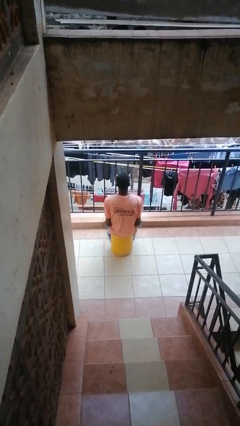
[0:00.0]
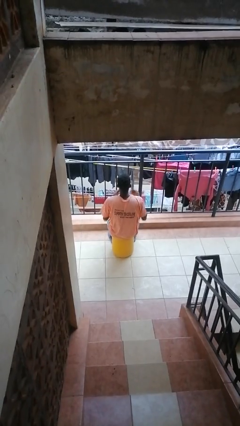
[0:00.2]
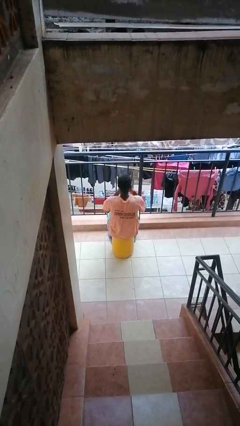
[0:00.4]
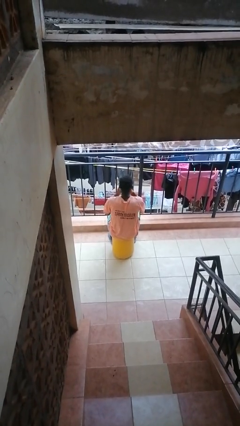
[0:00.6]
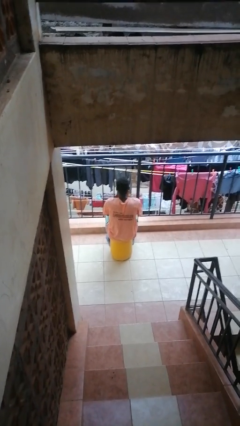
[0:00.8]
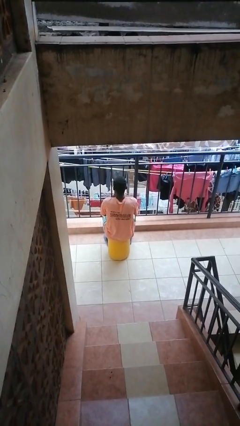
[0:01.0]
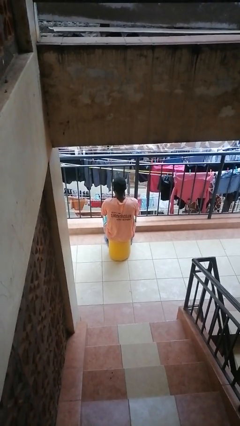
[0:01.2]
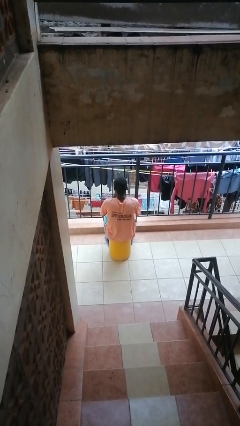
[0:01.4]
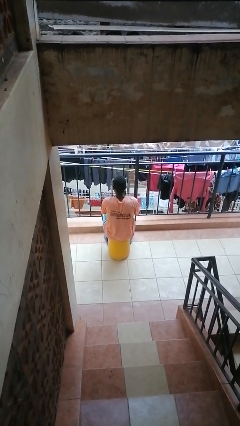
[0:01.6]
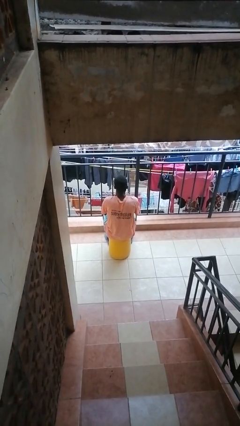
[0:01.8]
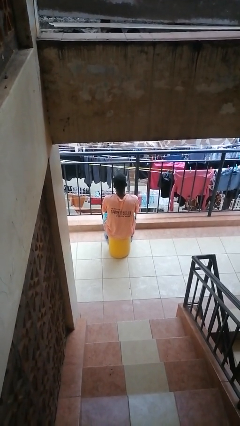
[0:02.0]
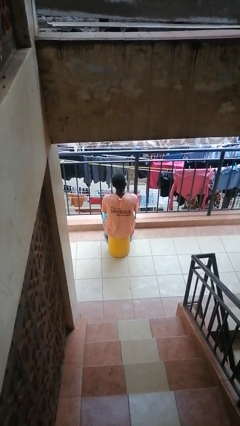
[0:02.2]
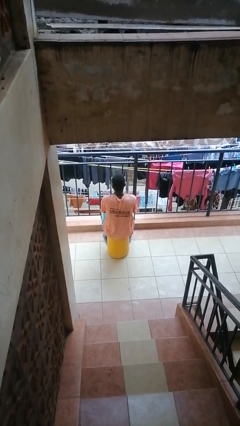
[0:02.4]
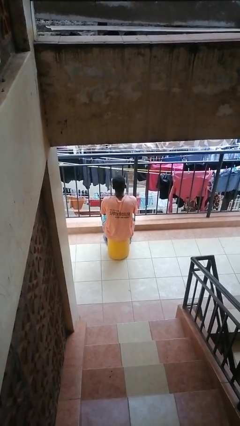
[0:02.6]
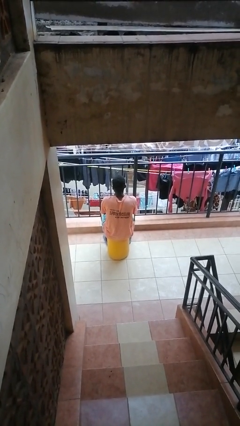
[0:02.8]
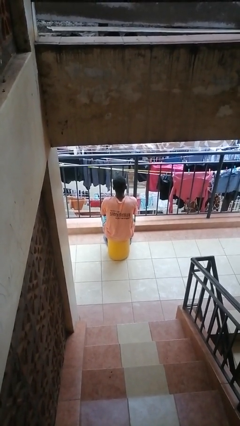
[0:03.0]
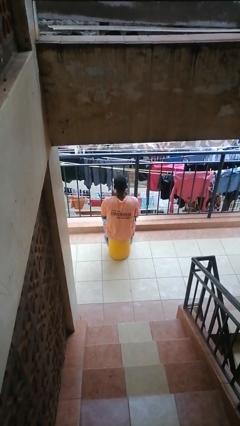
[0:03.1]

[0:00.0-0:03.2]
person blows into hands

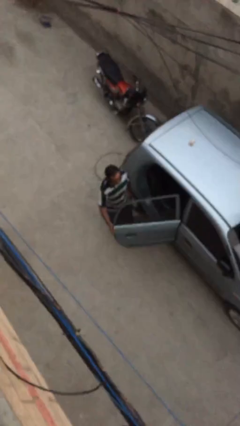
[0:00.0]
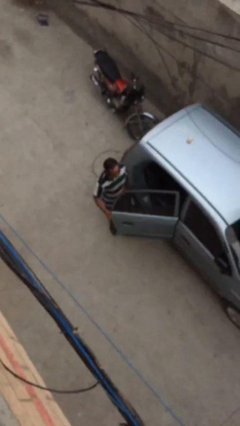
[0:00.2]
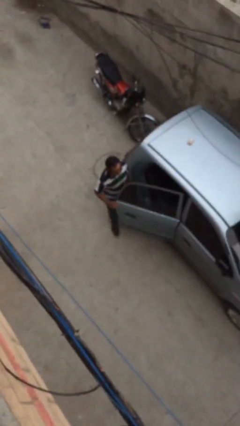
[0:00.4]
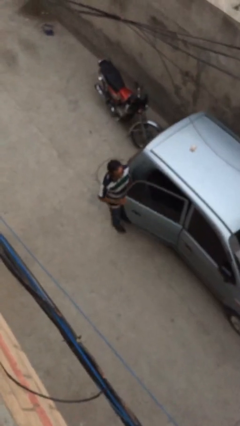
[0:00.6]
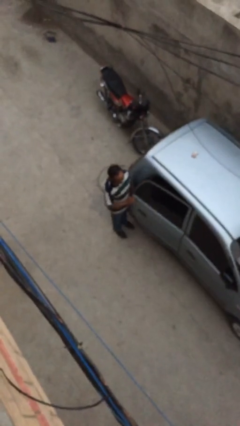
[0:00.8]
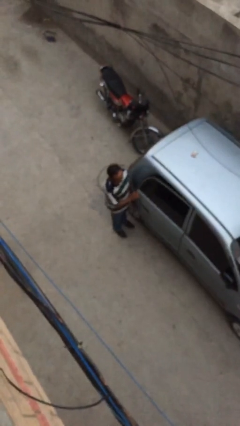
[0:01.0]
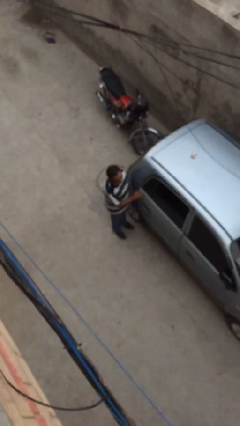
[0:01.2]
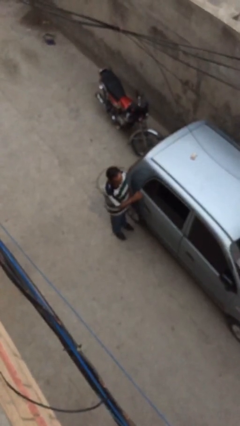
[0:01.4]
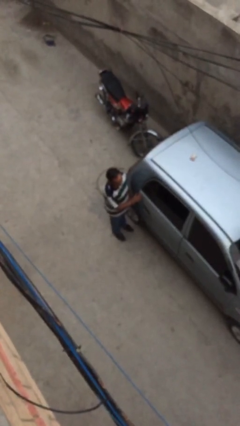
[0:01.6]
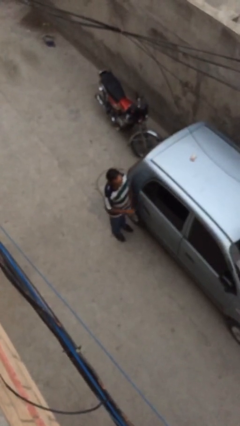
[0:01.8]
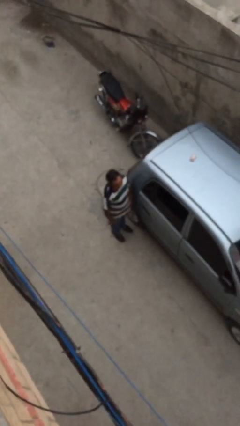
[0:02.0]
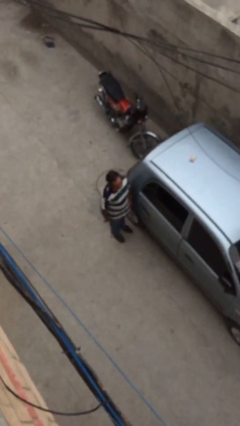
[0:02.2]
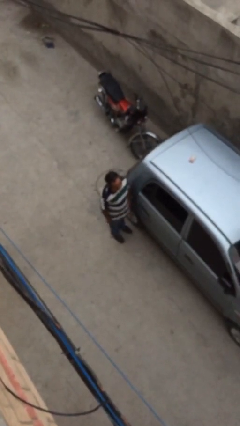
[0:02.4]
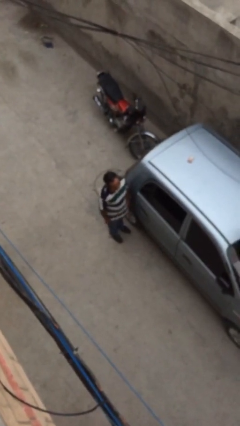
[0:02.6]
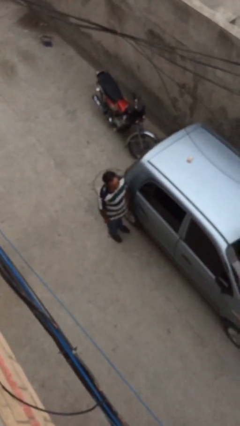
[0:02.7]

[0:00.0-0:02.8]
person closes car door

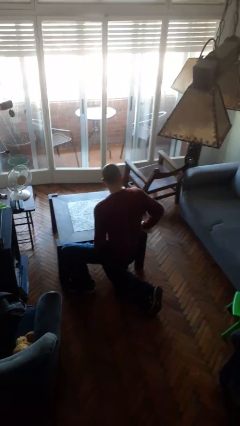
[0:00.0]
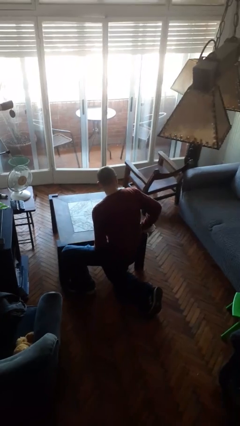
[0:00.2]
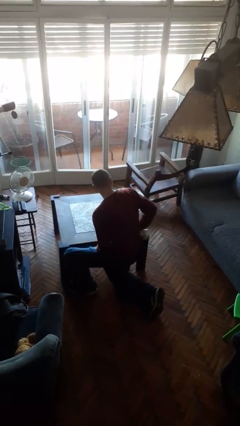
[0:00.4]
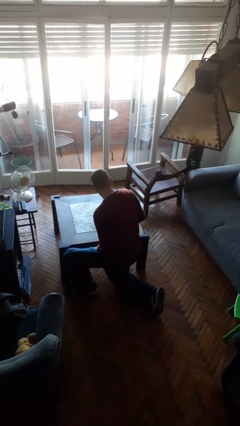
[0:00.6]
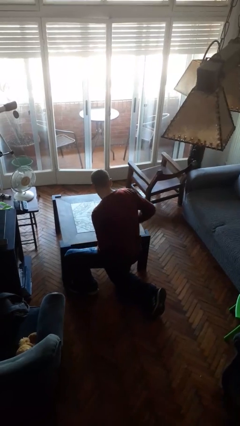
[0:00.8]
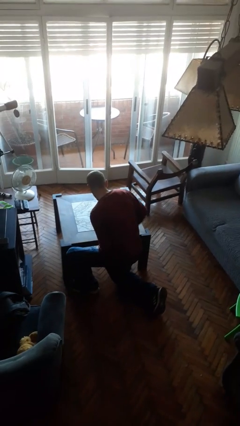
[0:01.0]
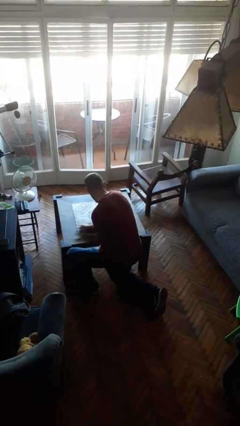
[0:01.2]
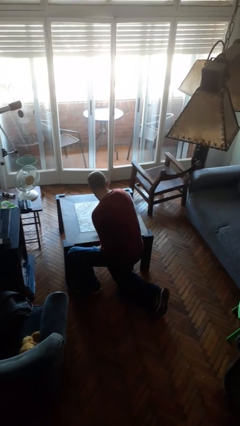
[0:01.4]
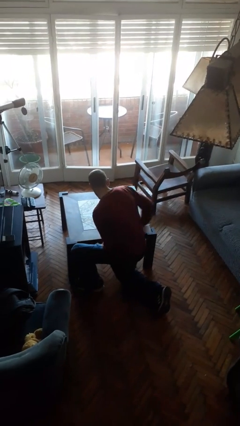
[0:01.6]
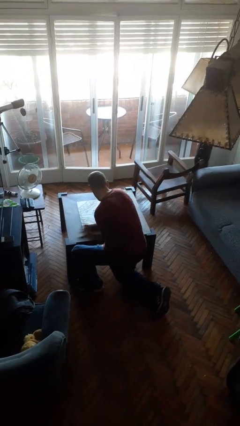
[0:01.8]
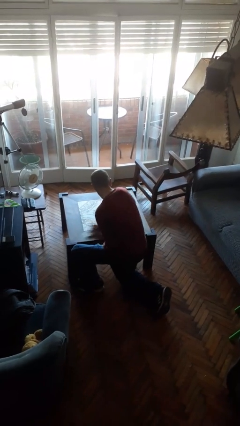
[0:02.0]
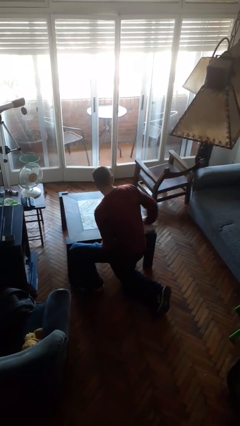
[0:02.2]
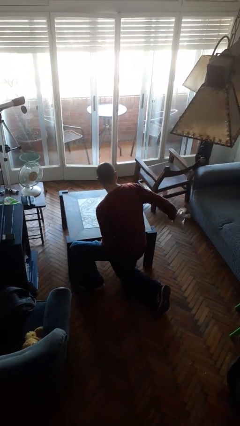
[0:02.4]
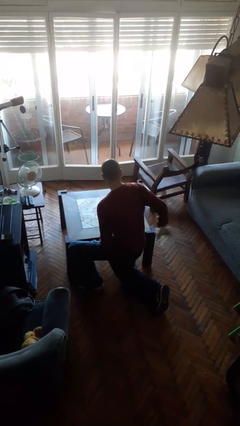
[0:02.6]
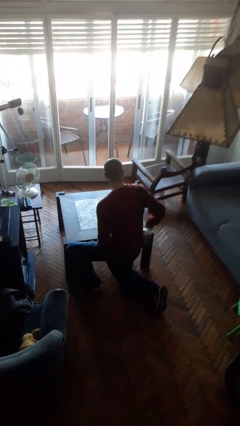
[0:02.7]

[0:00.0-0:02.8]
person cleans table with rag

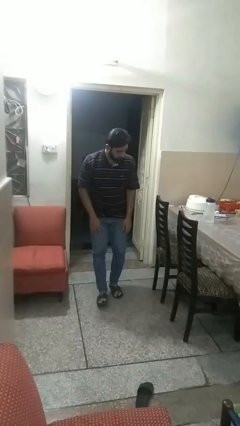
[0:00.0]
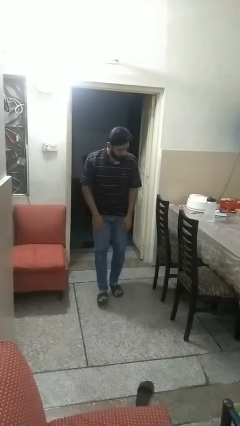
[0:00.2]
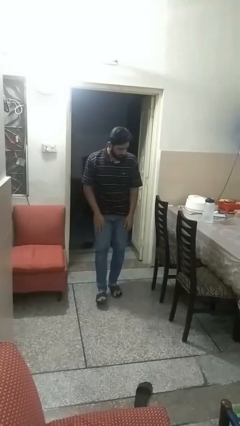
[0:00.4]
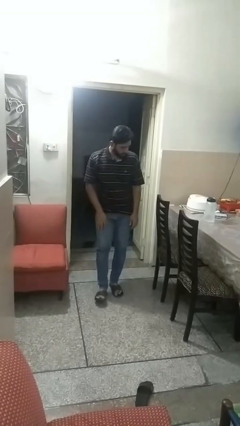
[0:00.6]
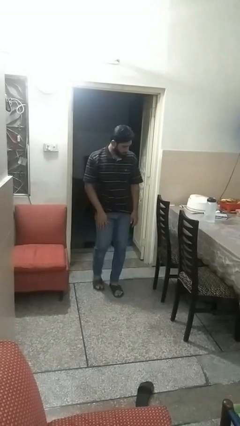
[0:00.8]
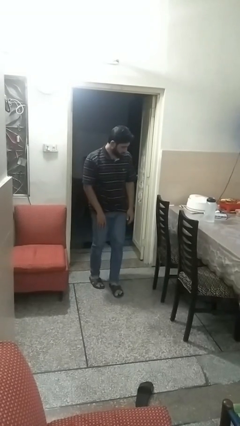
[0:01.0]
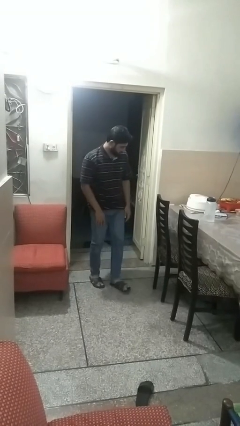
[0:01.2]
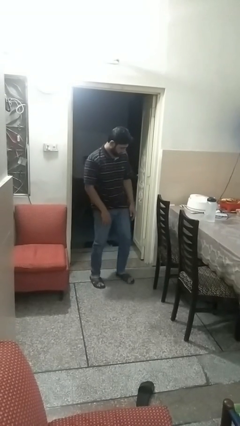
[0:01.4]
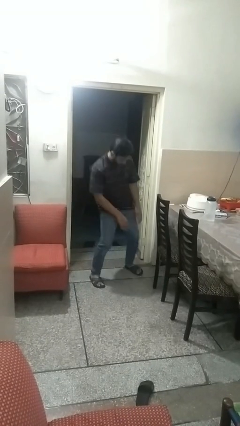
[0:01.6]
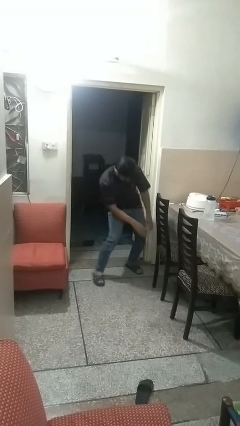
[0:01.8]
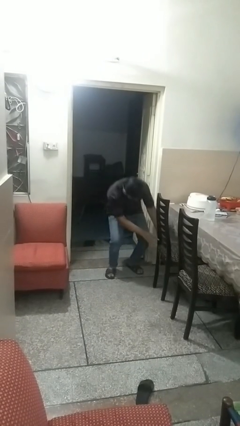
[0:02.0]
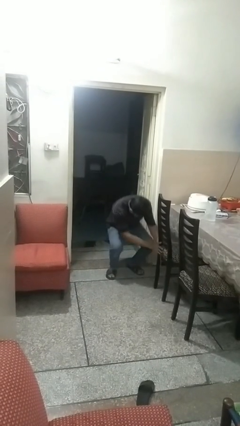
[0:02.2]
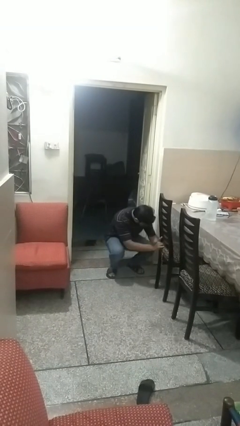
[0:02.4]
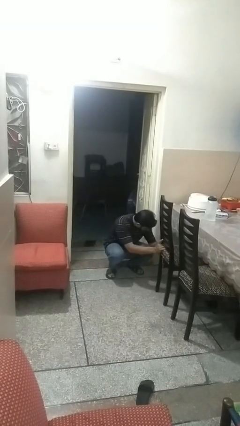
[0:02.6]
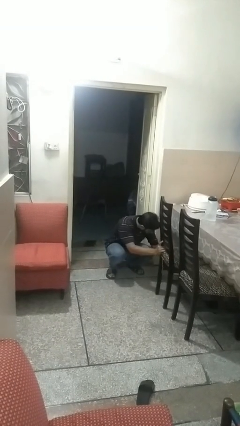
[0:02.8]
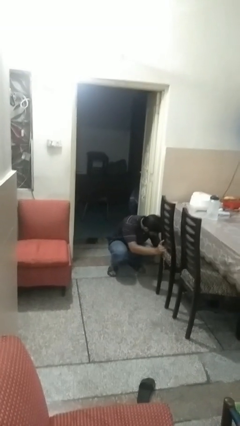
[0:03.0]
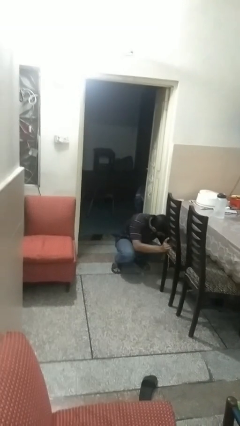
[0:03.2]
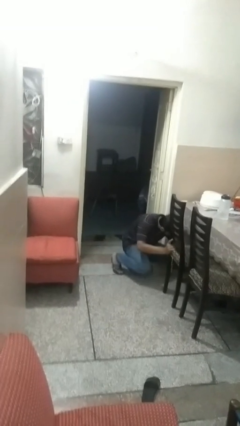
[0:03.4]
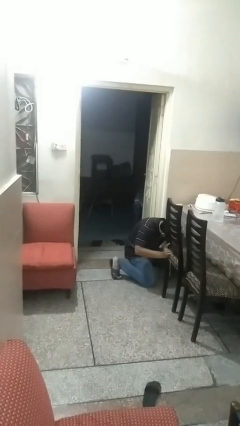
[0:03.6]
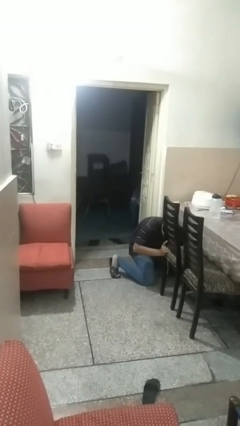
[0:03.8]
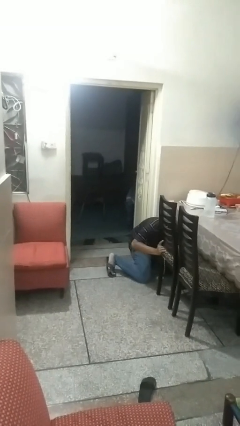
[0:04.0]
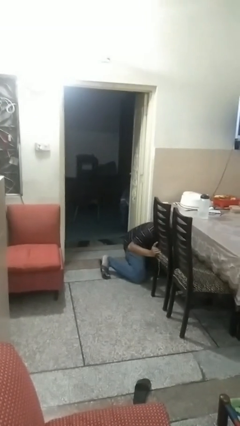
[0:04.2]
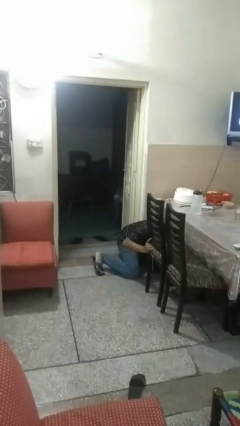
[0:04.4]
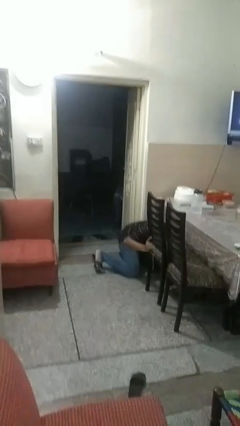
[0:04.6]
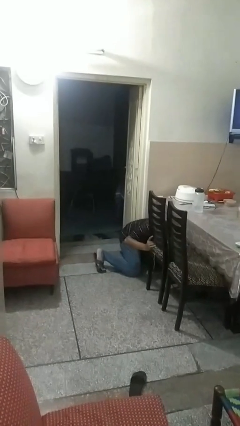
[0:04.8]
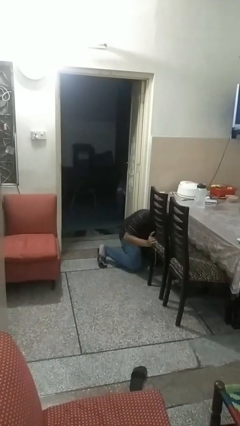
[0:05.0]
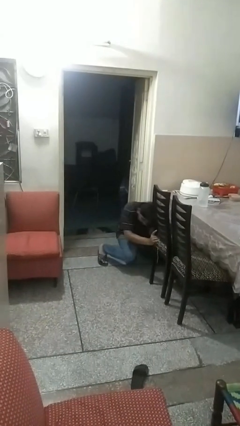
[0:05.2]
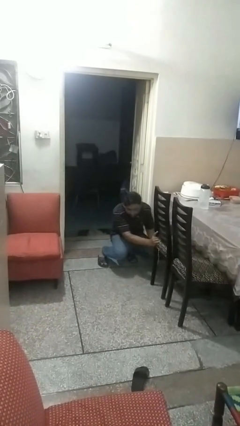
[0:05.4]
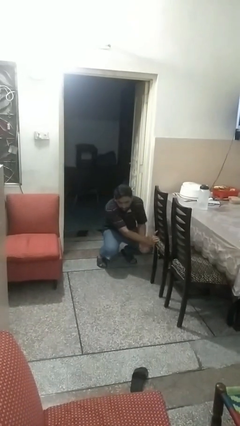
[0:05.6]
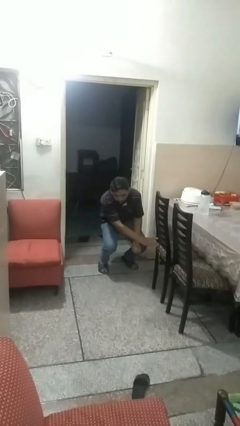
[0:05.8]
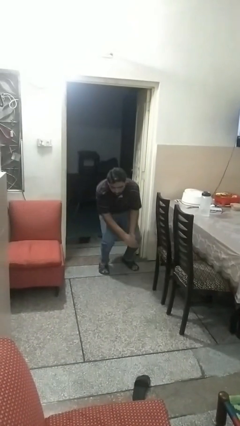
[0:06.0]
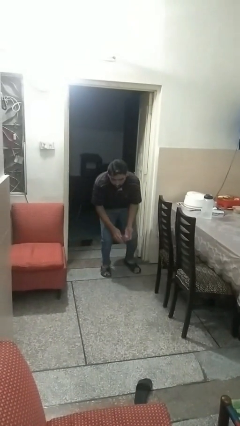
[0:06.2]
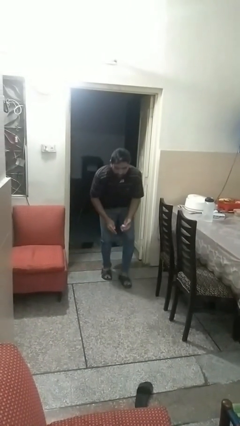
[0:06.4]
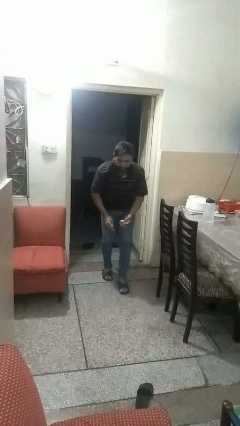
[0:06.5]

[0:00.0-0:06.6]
person picks up object from floor

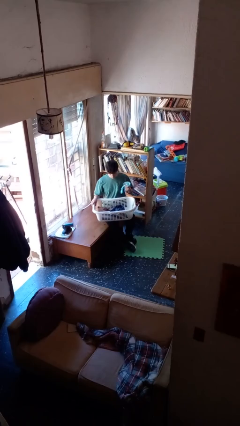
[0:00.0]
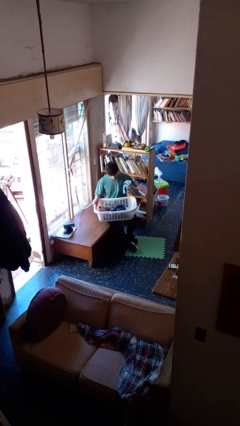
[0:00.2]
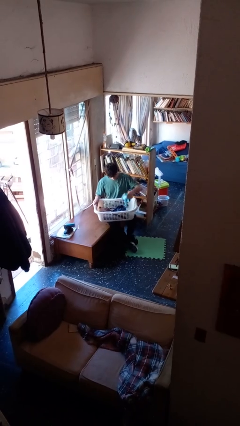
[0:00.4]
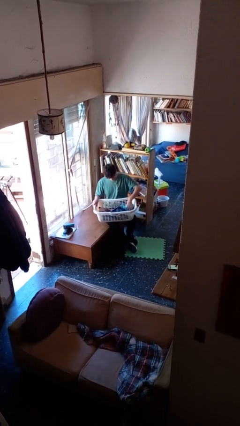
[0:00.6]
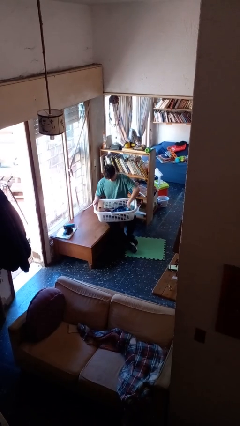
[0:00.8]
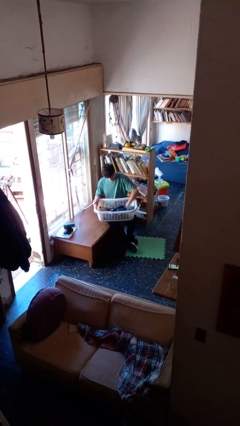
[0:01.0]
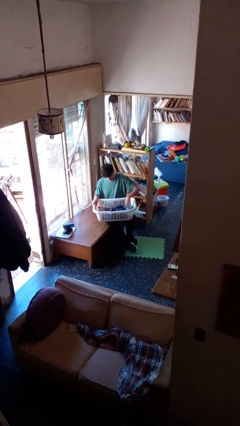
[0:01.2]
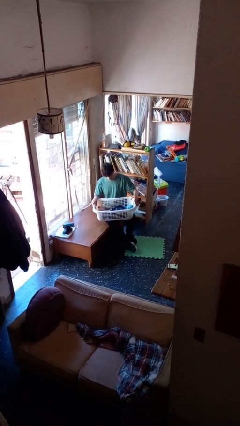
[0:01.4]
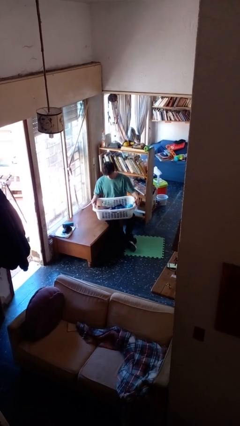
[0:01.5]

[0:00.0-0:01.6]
person puts object into basket

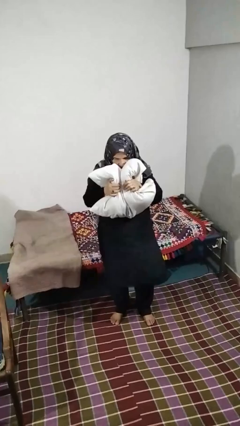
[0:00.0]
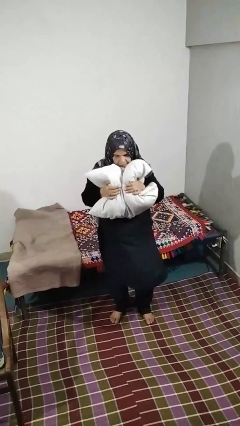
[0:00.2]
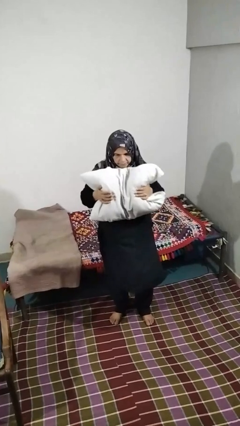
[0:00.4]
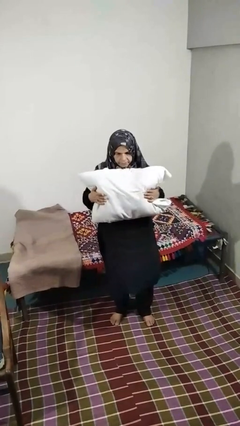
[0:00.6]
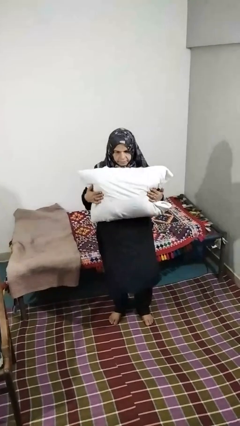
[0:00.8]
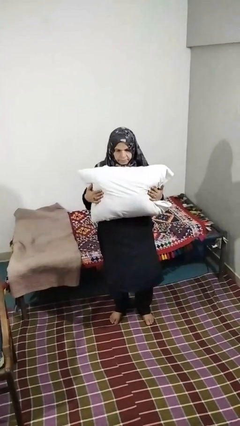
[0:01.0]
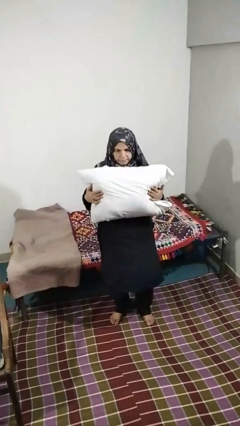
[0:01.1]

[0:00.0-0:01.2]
person squeezes object
